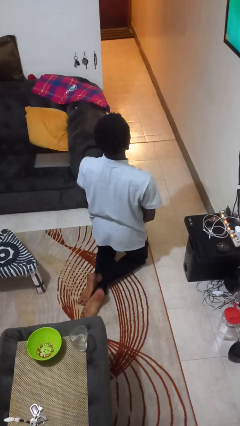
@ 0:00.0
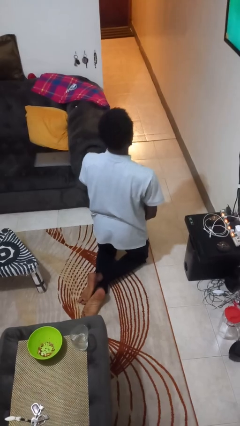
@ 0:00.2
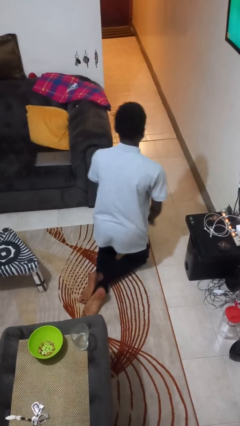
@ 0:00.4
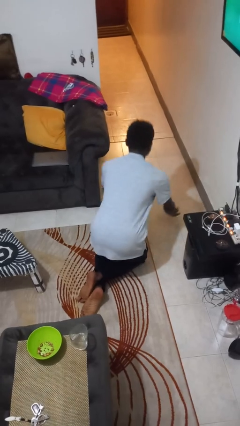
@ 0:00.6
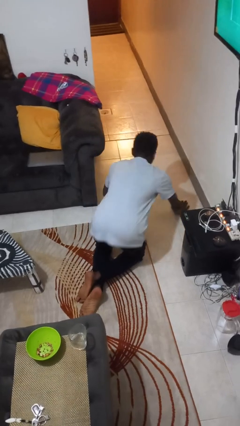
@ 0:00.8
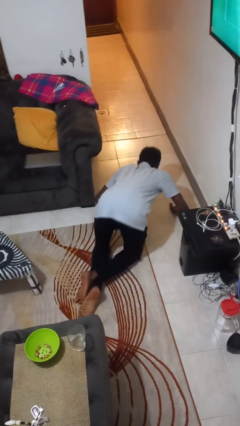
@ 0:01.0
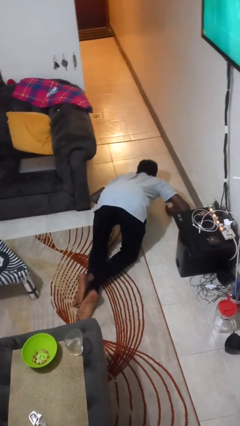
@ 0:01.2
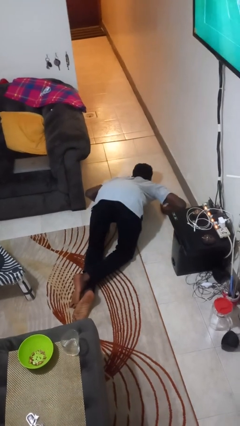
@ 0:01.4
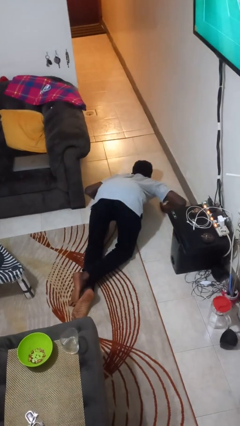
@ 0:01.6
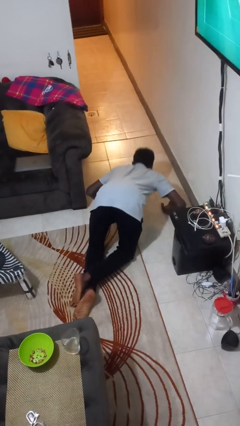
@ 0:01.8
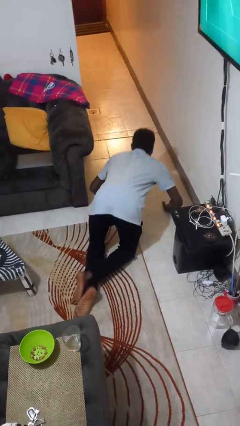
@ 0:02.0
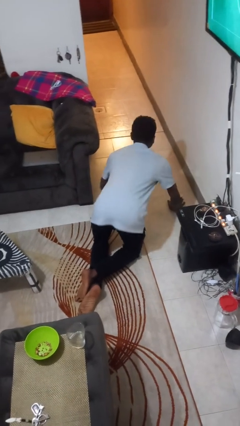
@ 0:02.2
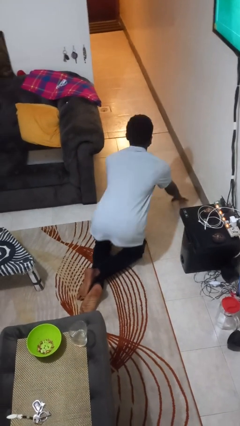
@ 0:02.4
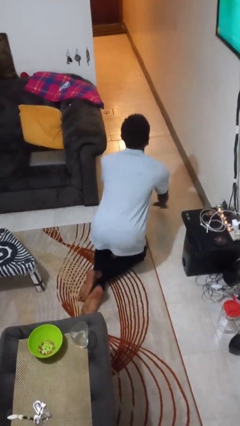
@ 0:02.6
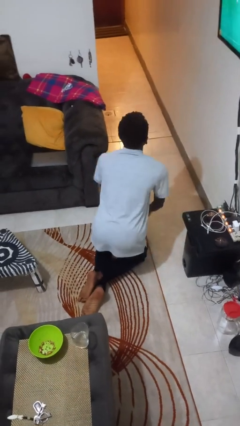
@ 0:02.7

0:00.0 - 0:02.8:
person exercises with pushup

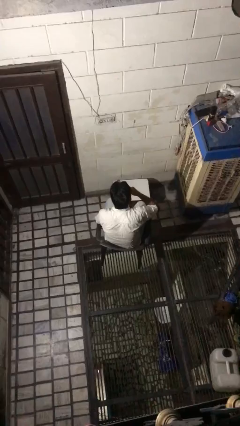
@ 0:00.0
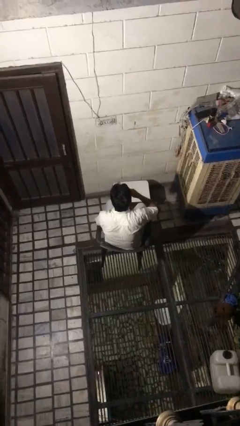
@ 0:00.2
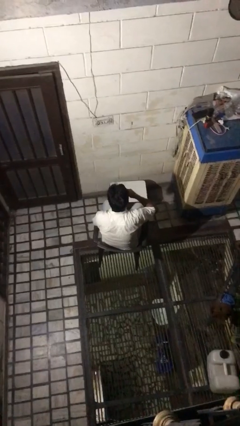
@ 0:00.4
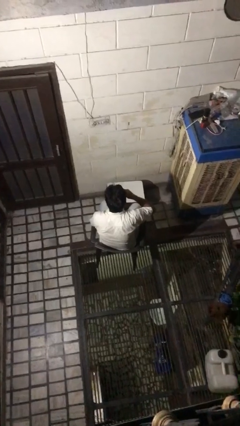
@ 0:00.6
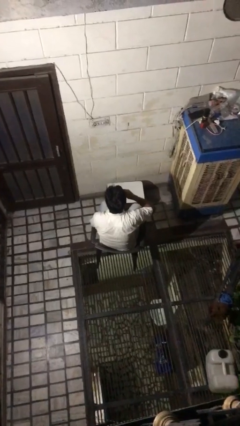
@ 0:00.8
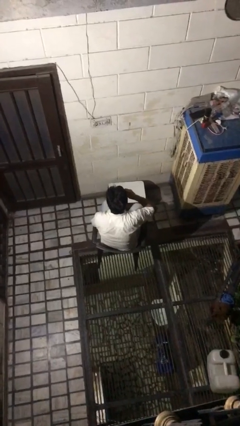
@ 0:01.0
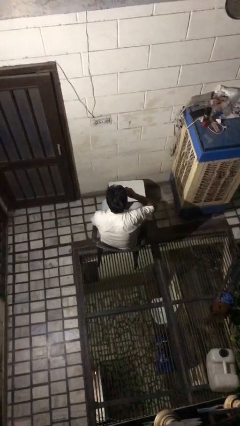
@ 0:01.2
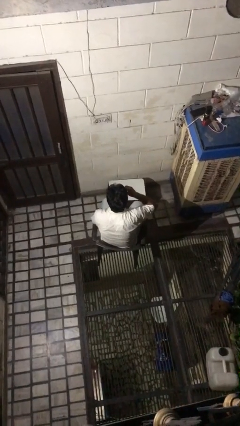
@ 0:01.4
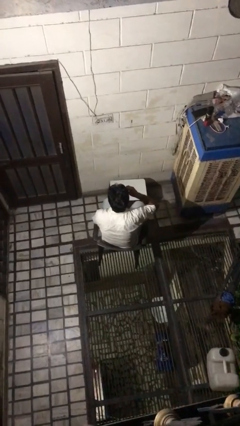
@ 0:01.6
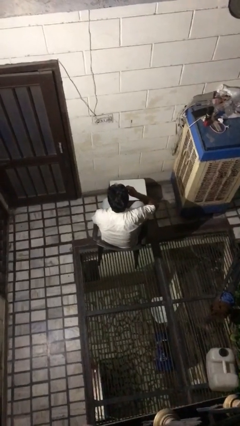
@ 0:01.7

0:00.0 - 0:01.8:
person drinks from mug

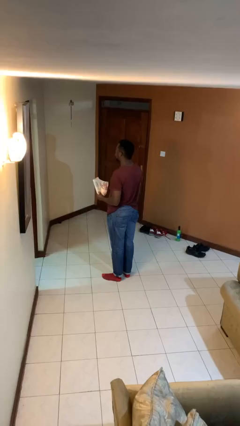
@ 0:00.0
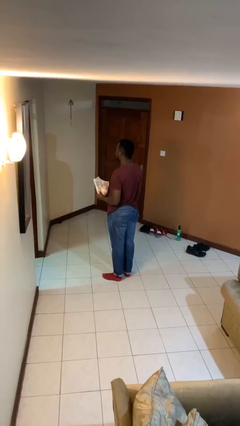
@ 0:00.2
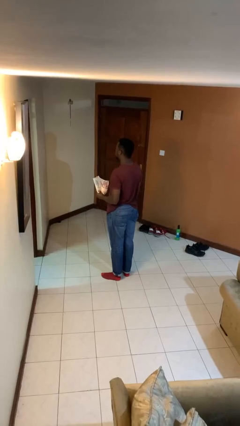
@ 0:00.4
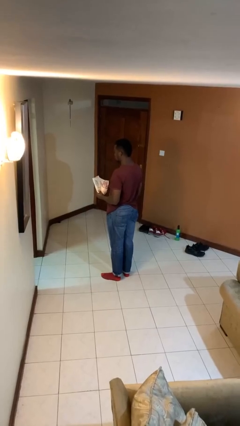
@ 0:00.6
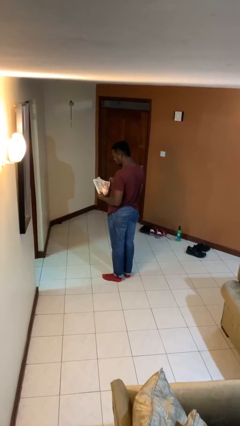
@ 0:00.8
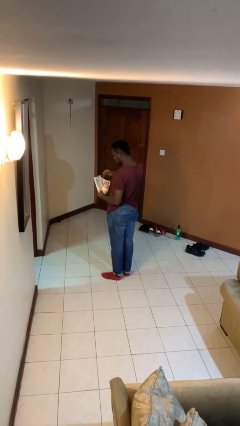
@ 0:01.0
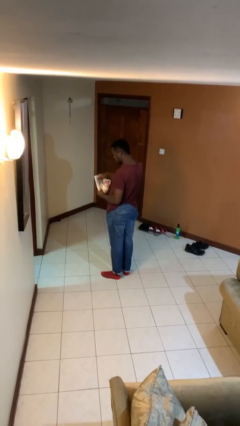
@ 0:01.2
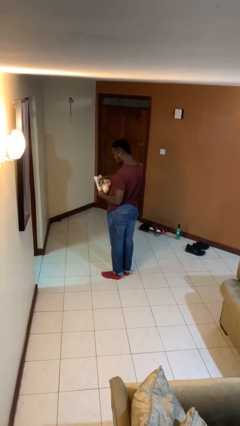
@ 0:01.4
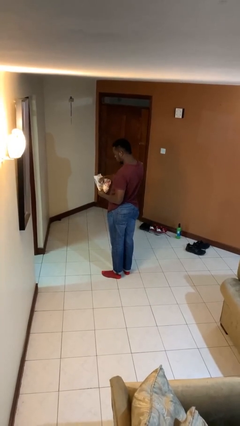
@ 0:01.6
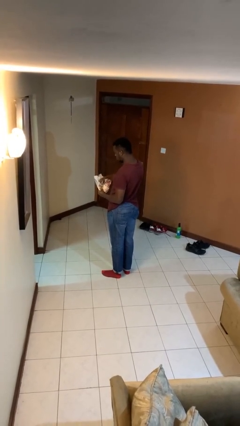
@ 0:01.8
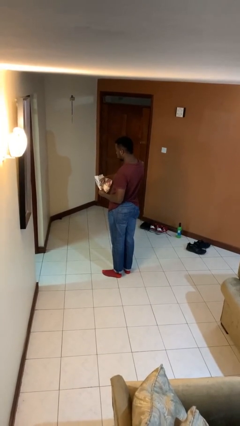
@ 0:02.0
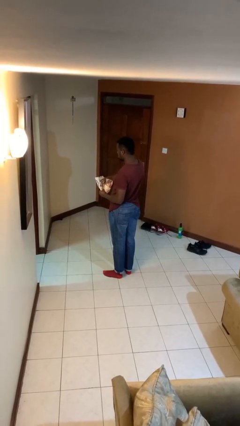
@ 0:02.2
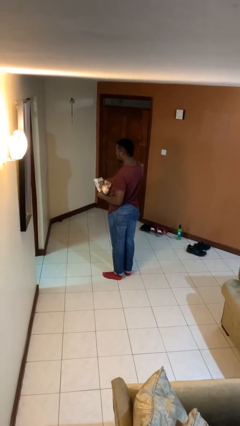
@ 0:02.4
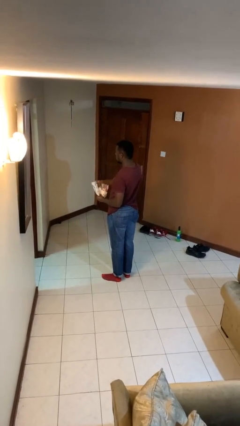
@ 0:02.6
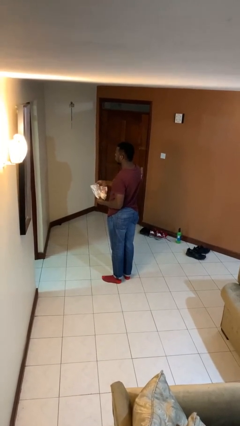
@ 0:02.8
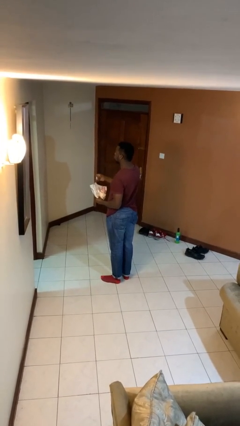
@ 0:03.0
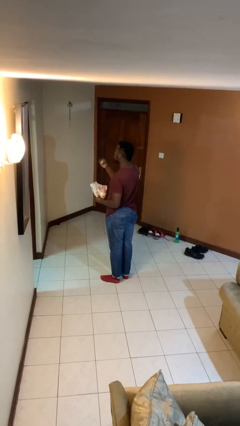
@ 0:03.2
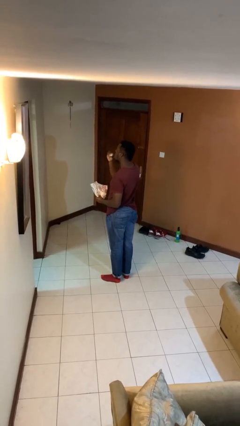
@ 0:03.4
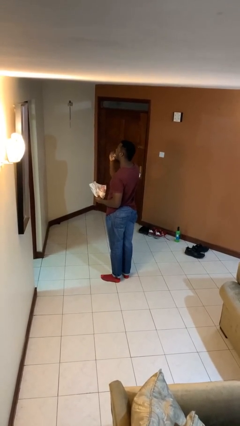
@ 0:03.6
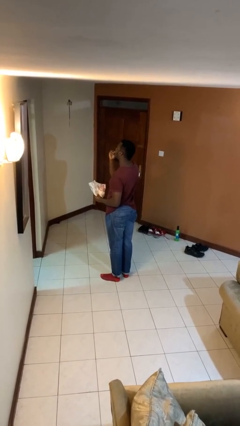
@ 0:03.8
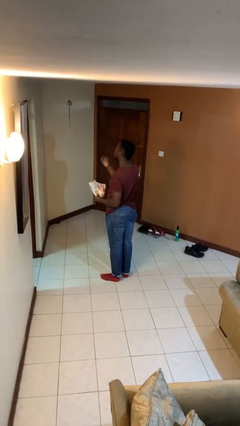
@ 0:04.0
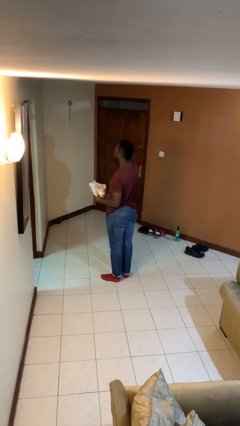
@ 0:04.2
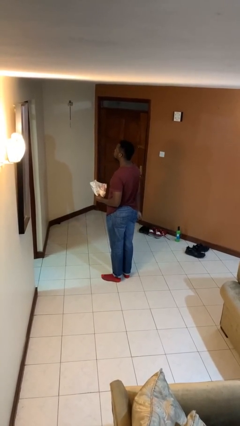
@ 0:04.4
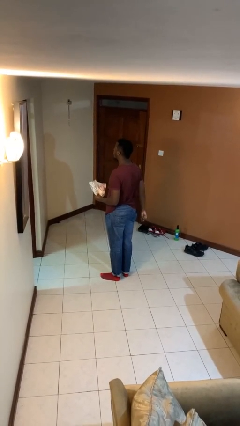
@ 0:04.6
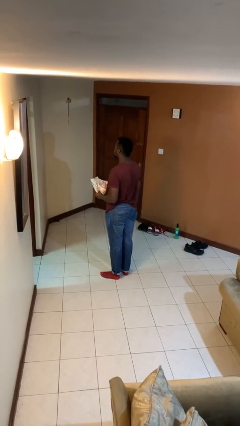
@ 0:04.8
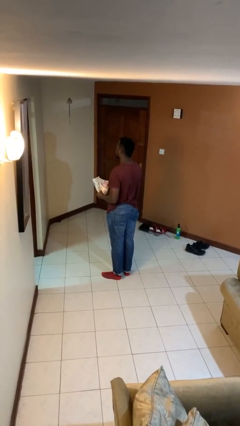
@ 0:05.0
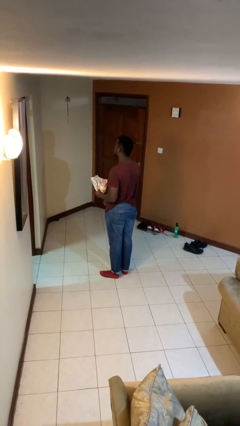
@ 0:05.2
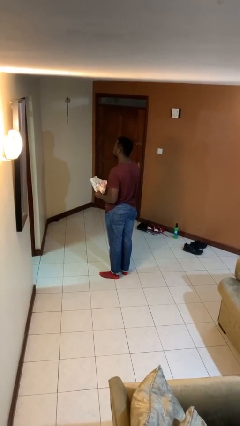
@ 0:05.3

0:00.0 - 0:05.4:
person eats snack from bag

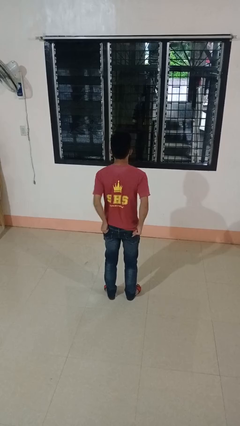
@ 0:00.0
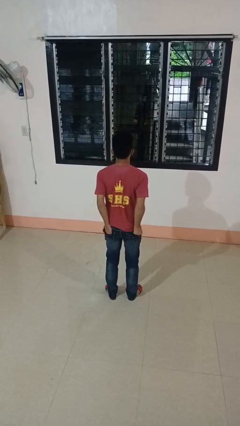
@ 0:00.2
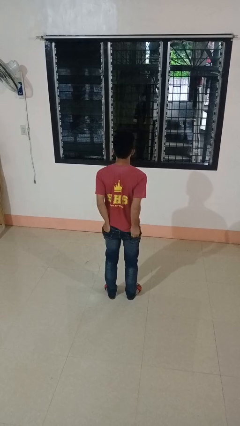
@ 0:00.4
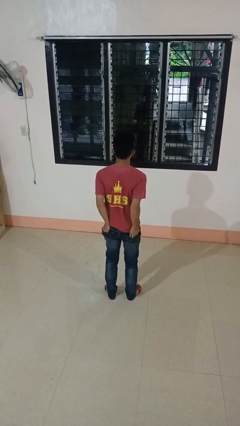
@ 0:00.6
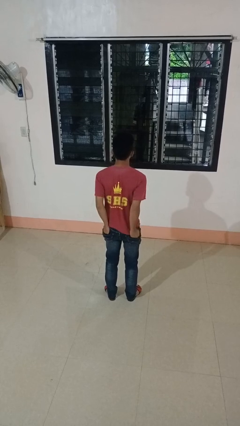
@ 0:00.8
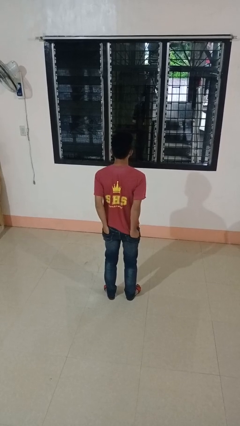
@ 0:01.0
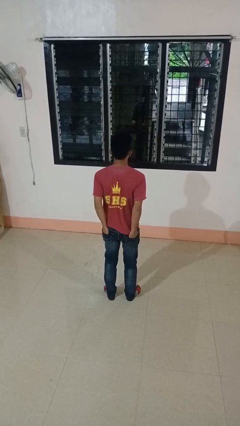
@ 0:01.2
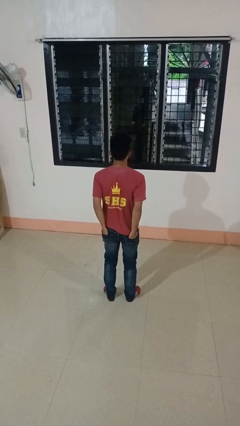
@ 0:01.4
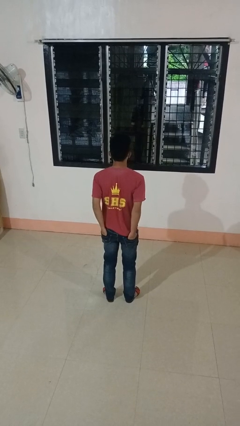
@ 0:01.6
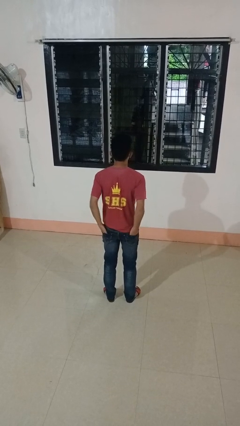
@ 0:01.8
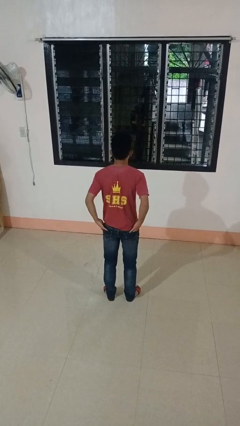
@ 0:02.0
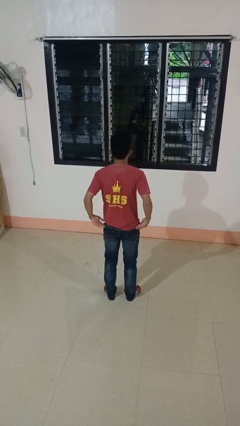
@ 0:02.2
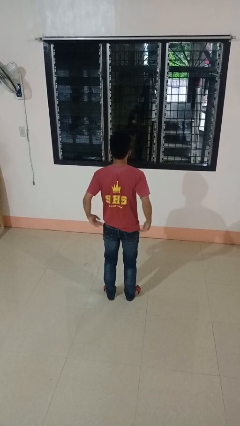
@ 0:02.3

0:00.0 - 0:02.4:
person puts hands in back pockets

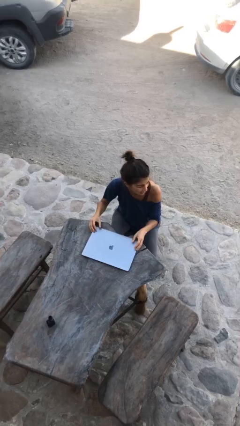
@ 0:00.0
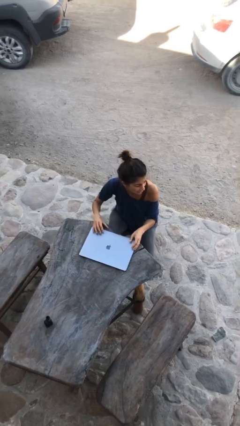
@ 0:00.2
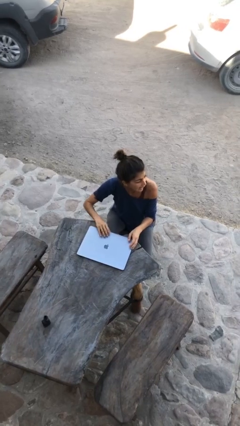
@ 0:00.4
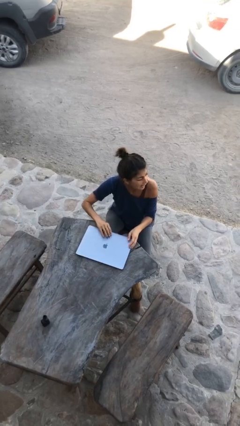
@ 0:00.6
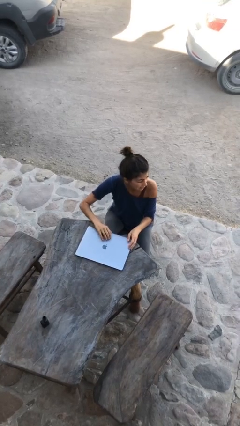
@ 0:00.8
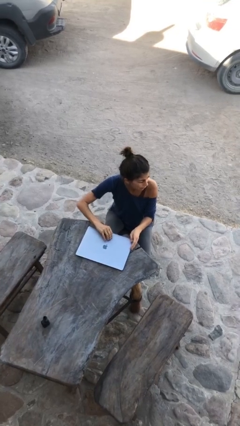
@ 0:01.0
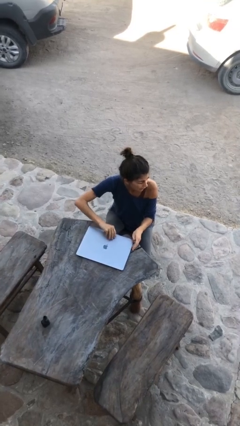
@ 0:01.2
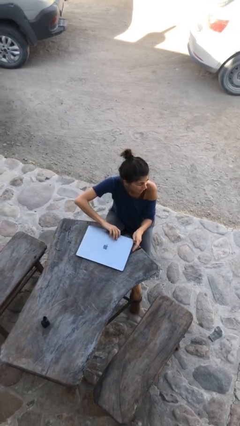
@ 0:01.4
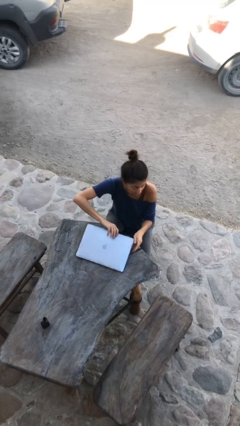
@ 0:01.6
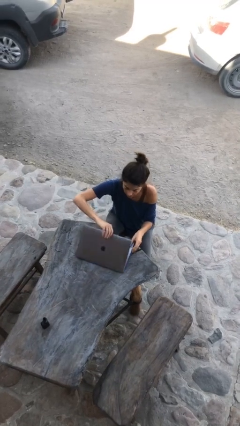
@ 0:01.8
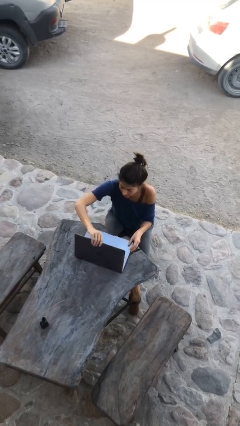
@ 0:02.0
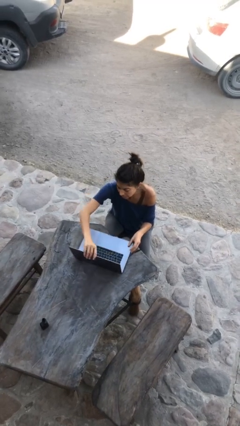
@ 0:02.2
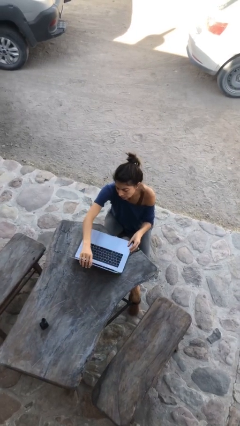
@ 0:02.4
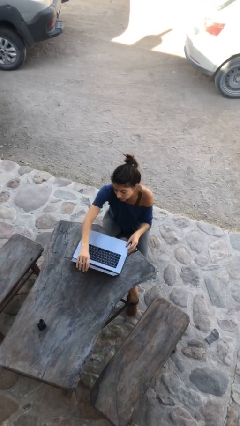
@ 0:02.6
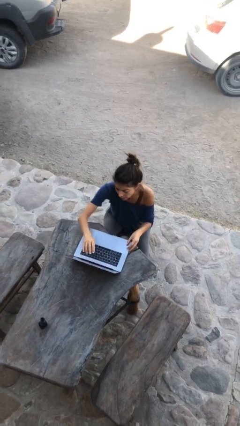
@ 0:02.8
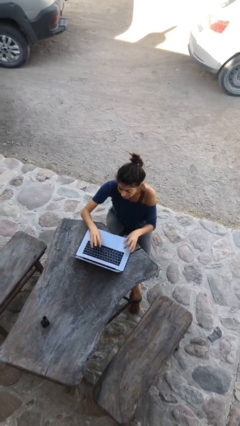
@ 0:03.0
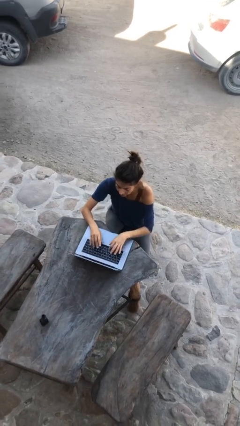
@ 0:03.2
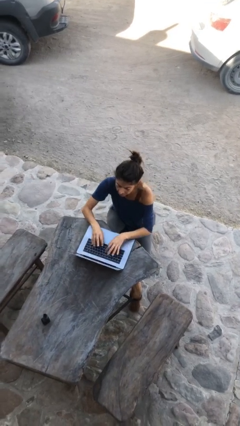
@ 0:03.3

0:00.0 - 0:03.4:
person interacts with laptop

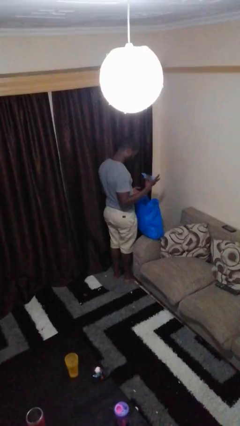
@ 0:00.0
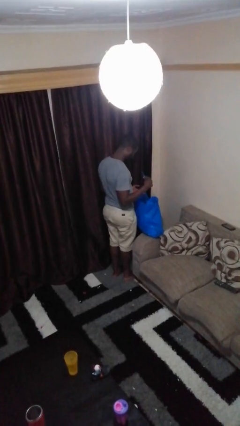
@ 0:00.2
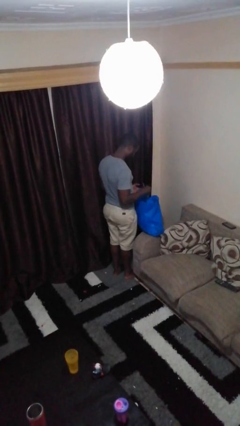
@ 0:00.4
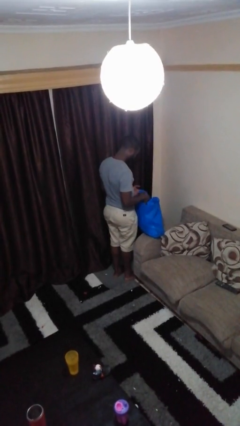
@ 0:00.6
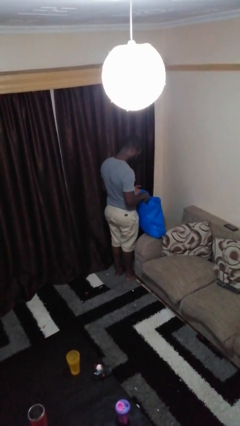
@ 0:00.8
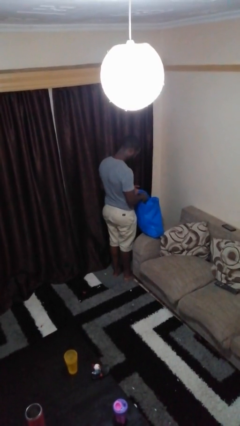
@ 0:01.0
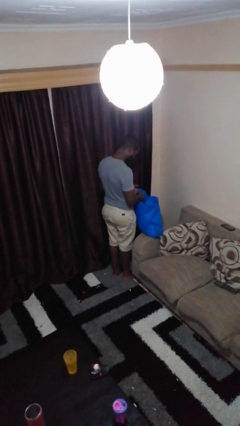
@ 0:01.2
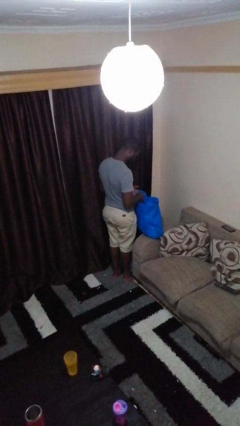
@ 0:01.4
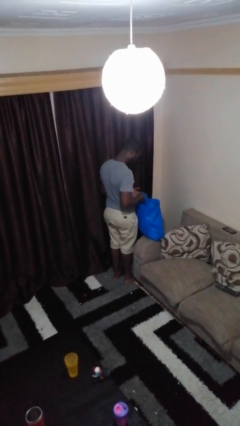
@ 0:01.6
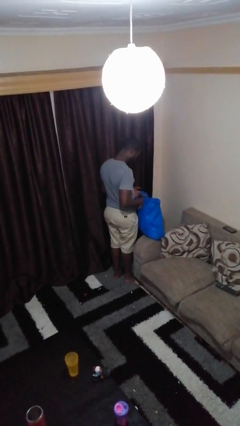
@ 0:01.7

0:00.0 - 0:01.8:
person puts object into bag
